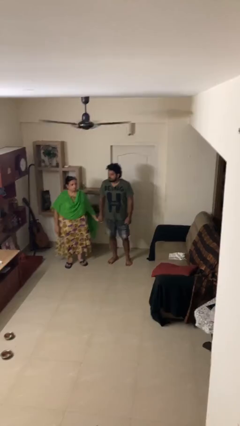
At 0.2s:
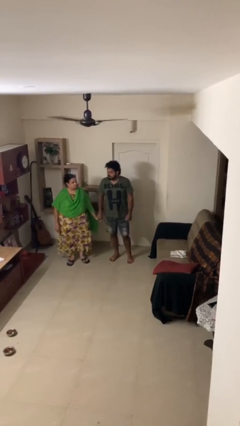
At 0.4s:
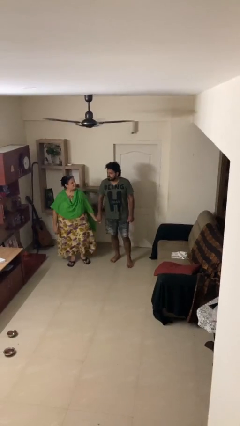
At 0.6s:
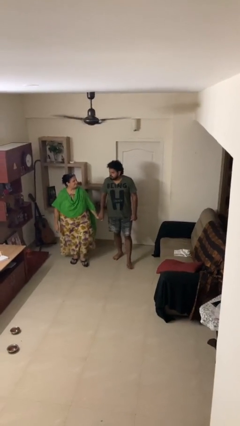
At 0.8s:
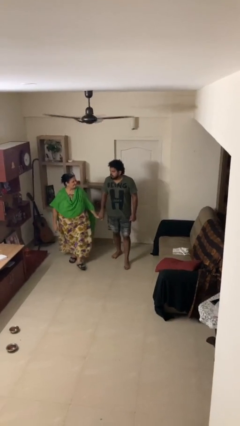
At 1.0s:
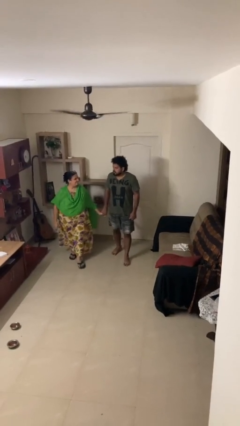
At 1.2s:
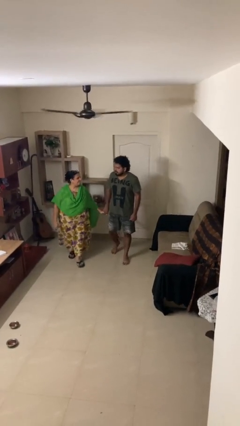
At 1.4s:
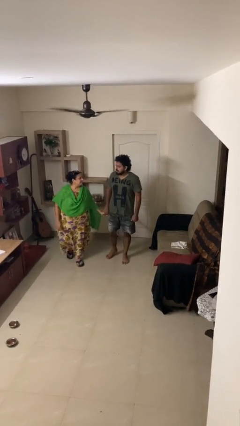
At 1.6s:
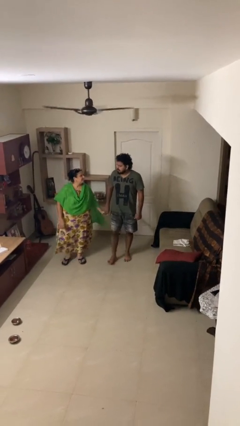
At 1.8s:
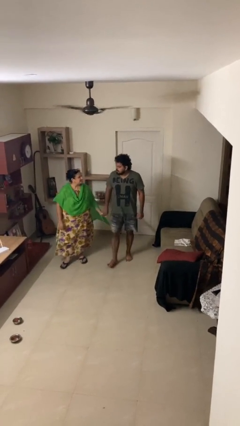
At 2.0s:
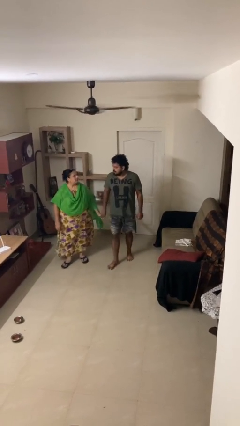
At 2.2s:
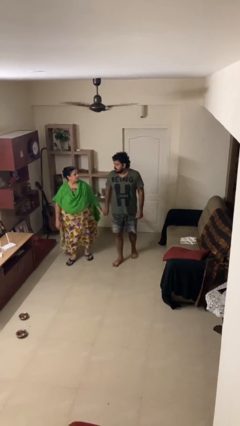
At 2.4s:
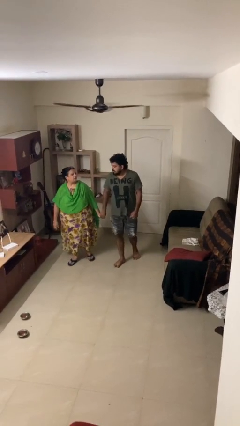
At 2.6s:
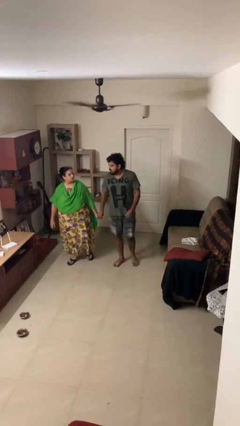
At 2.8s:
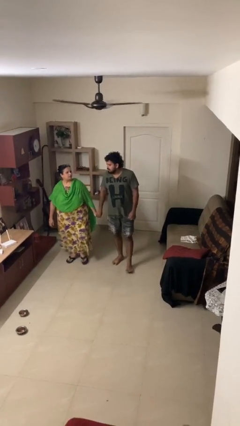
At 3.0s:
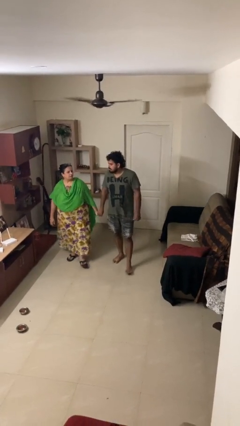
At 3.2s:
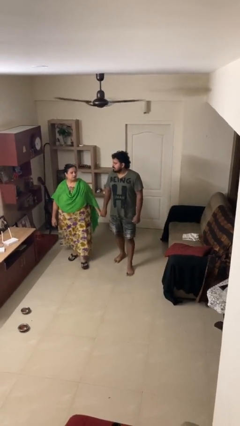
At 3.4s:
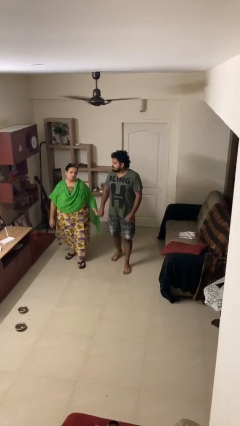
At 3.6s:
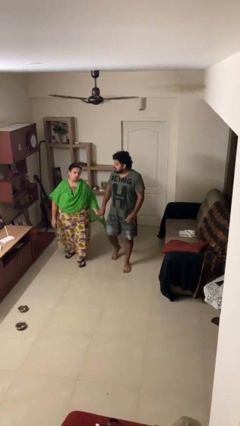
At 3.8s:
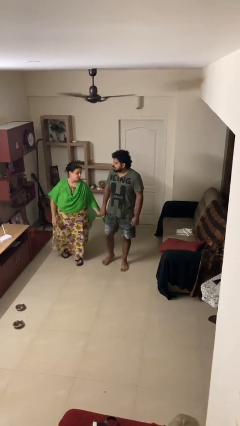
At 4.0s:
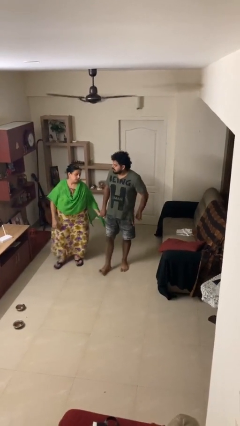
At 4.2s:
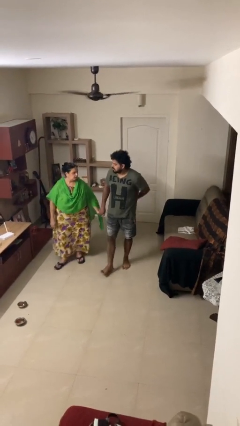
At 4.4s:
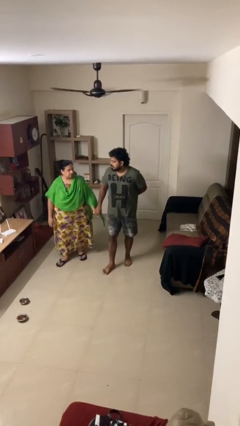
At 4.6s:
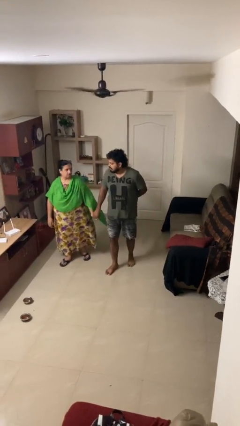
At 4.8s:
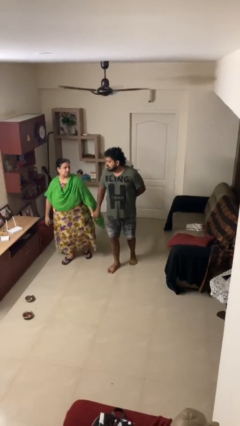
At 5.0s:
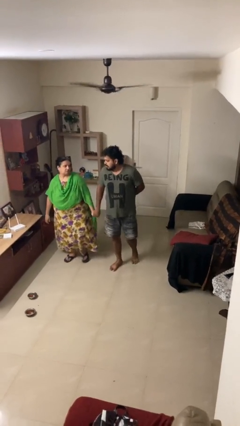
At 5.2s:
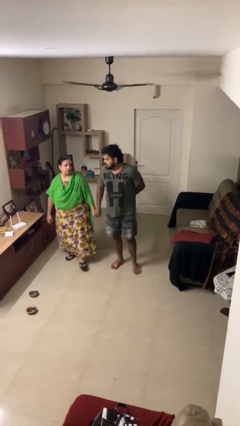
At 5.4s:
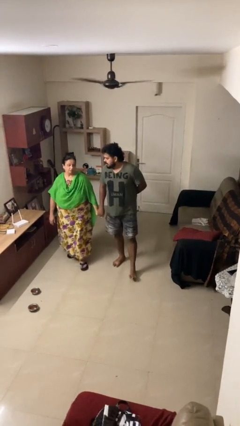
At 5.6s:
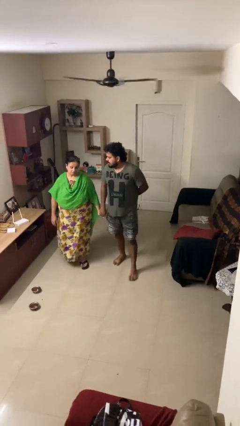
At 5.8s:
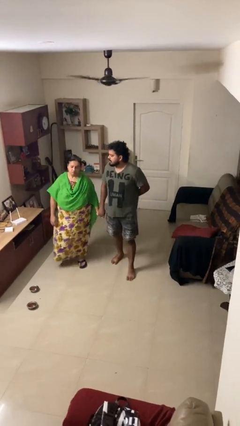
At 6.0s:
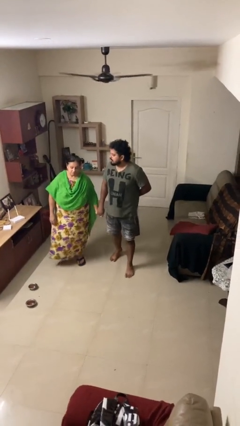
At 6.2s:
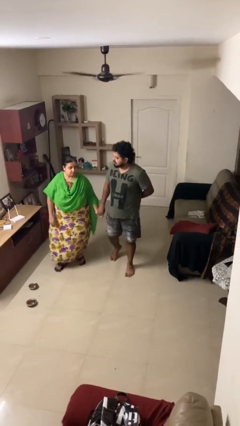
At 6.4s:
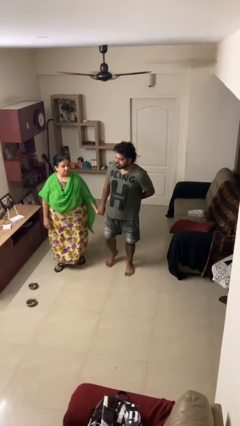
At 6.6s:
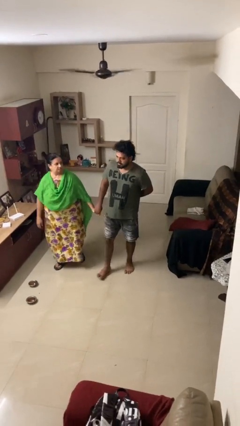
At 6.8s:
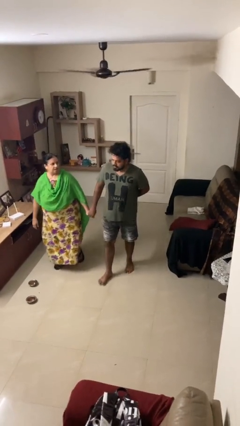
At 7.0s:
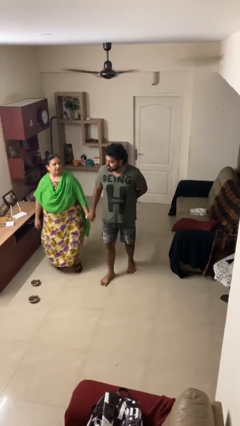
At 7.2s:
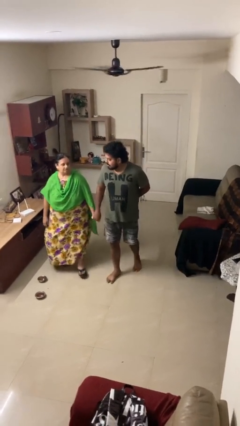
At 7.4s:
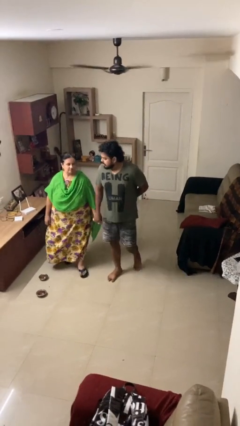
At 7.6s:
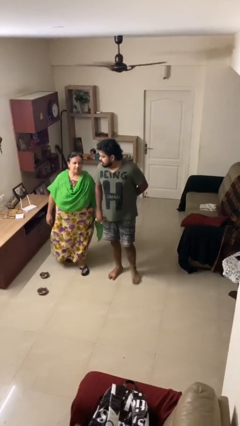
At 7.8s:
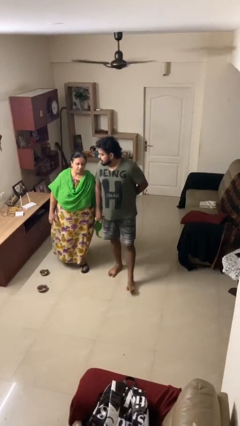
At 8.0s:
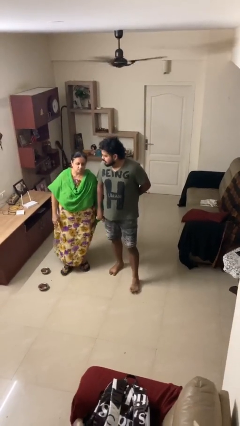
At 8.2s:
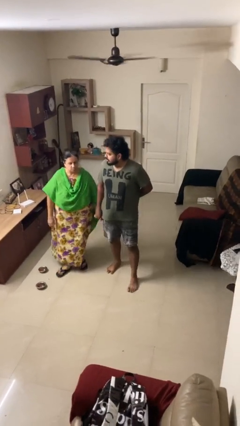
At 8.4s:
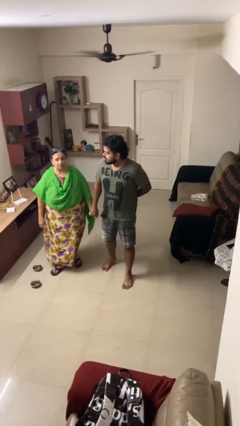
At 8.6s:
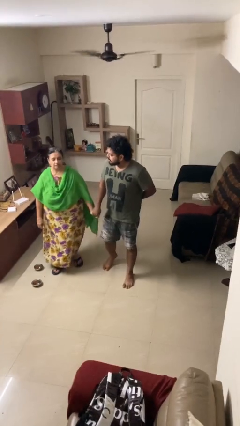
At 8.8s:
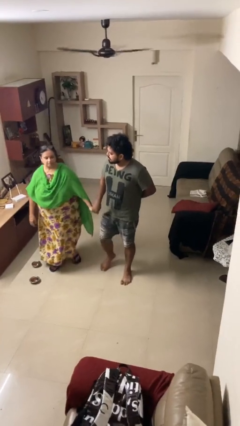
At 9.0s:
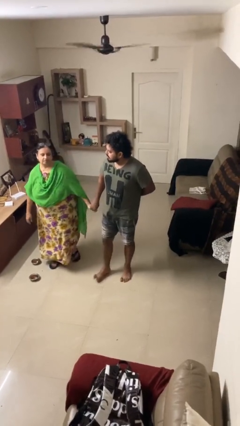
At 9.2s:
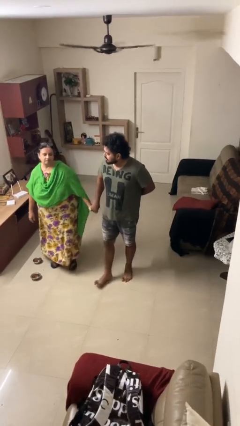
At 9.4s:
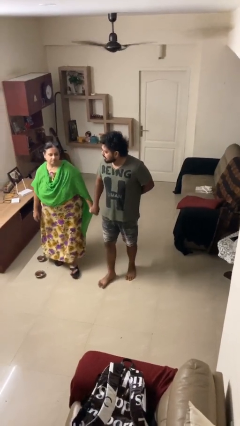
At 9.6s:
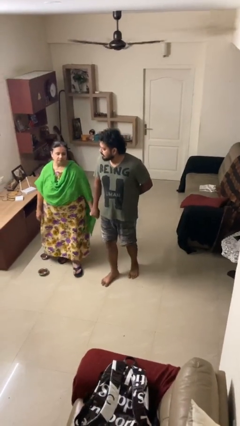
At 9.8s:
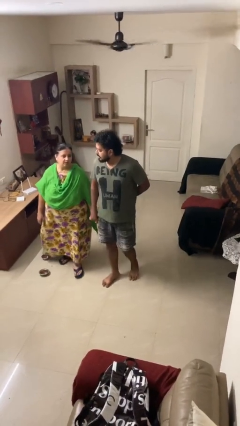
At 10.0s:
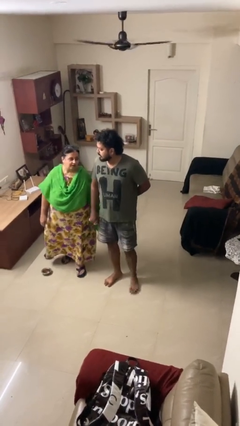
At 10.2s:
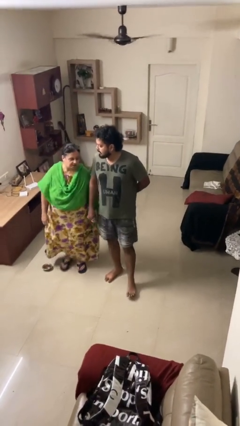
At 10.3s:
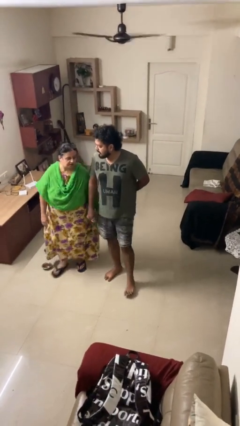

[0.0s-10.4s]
person holds hand

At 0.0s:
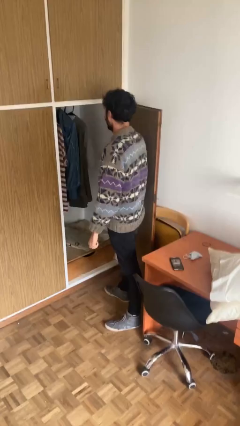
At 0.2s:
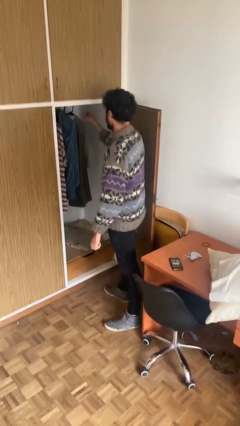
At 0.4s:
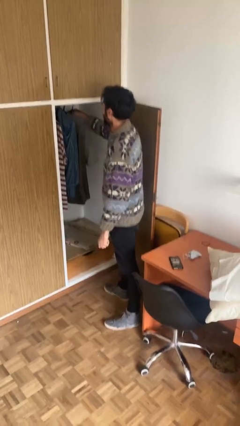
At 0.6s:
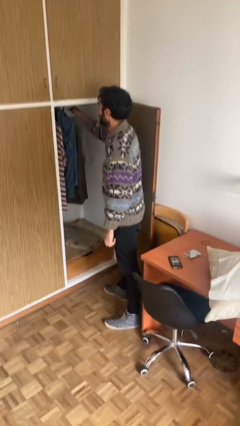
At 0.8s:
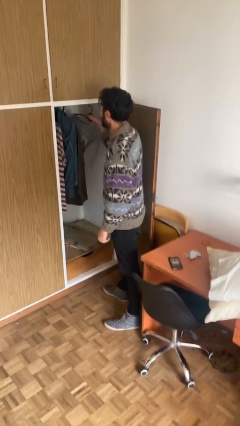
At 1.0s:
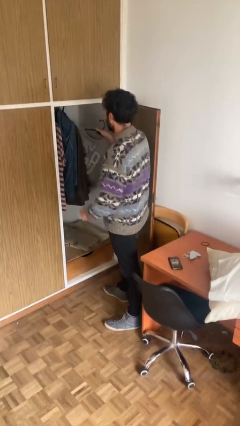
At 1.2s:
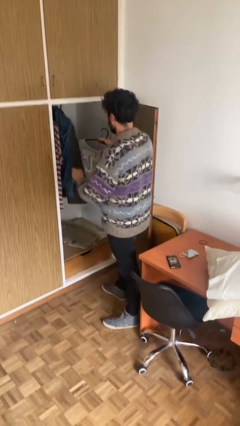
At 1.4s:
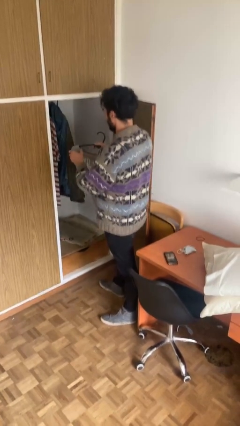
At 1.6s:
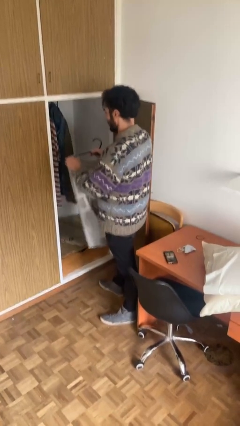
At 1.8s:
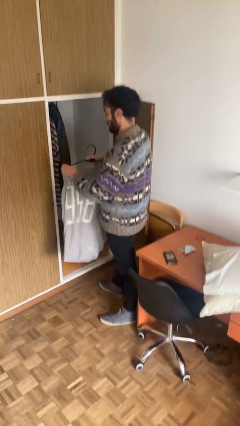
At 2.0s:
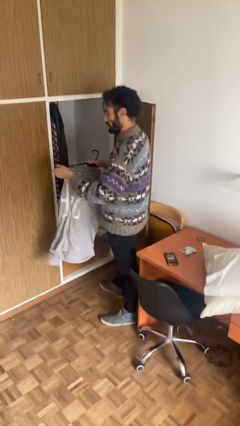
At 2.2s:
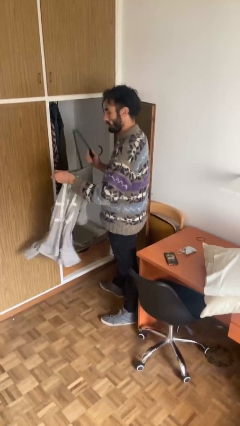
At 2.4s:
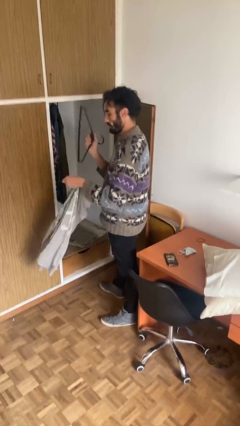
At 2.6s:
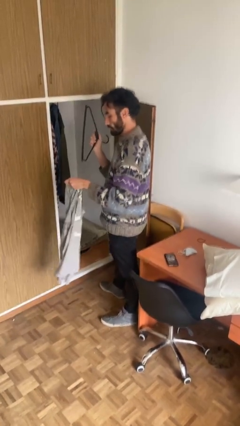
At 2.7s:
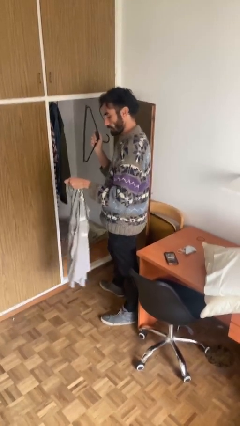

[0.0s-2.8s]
person takes clothes from closet

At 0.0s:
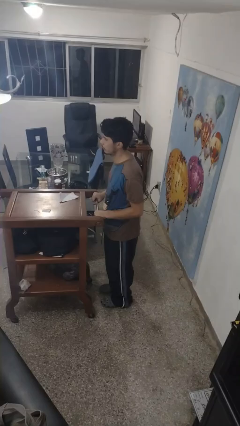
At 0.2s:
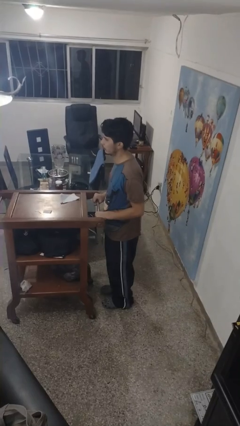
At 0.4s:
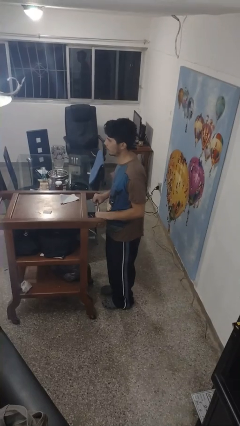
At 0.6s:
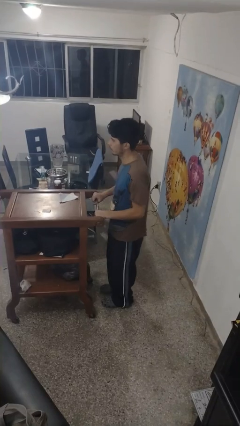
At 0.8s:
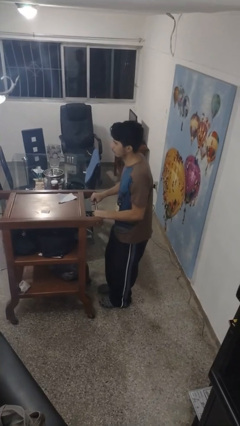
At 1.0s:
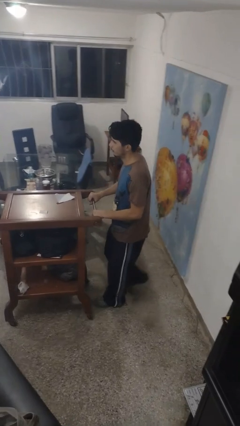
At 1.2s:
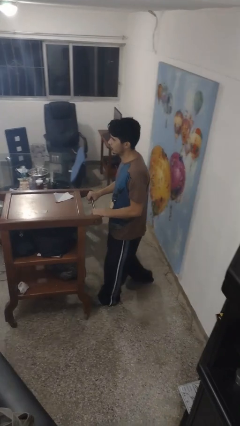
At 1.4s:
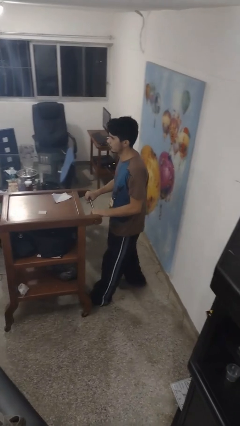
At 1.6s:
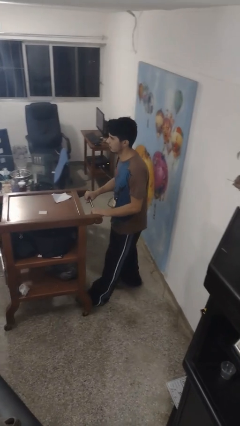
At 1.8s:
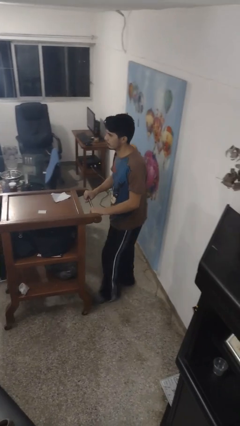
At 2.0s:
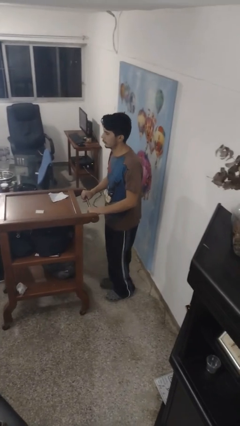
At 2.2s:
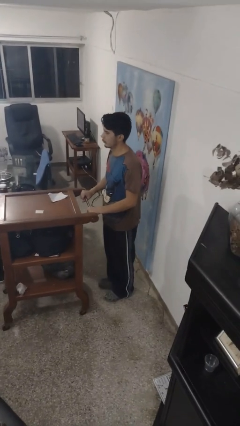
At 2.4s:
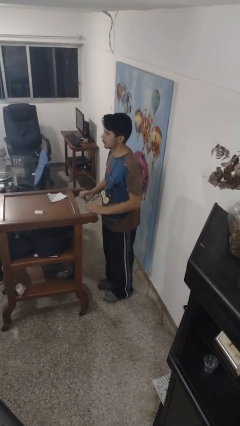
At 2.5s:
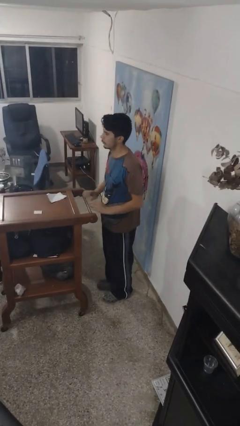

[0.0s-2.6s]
person pulls wheeled cart

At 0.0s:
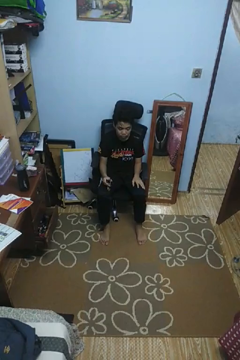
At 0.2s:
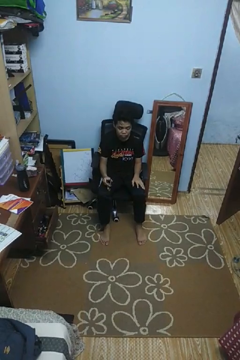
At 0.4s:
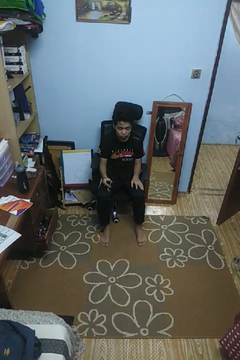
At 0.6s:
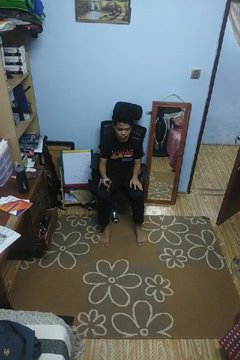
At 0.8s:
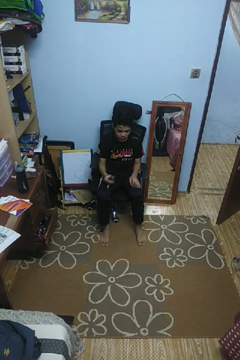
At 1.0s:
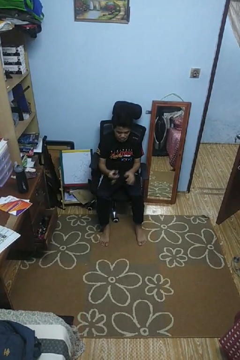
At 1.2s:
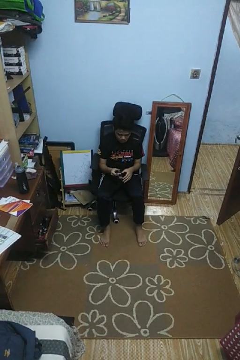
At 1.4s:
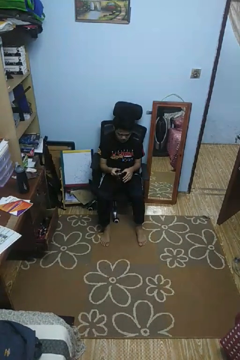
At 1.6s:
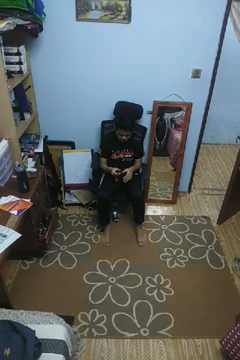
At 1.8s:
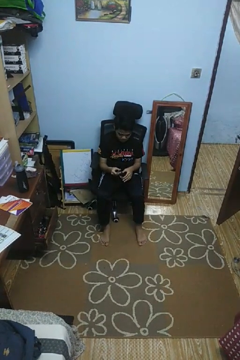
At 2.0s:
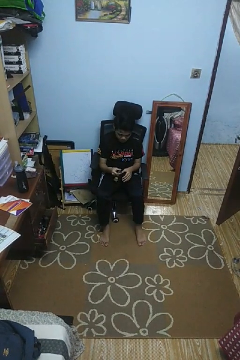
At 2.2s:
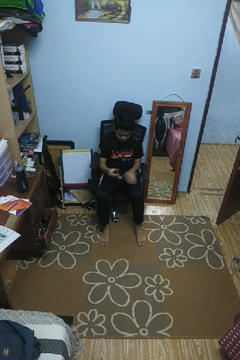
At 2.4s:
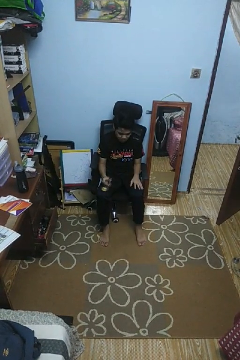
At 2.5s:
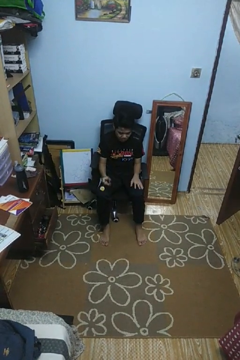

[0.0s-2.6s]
person clips fingernails
